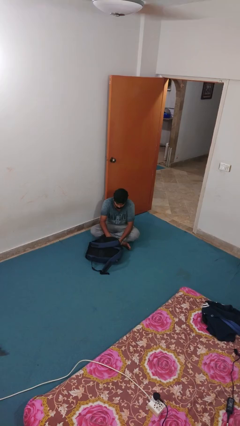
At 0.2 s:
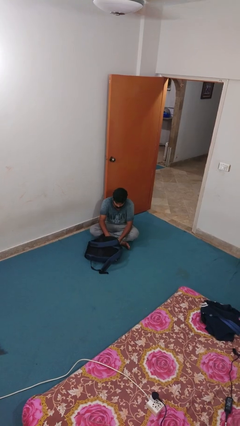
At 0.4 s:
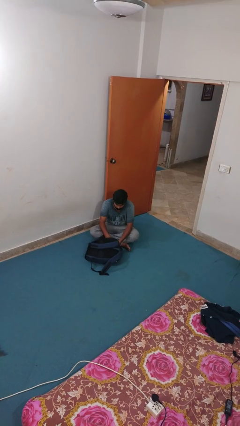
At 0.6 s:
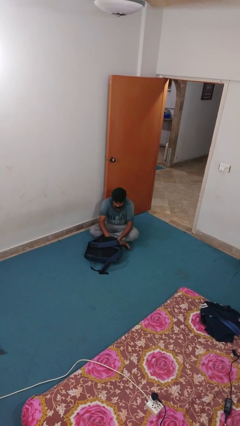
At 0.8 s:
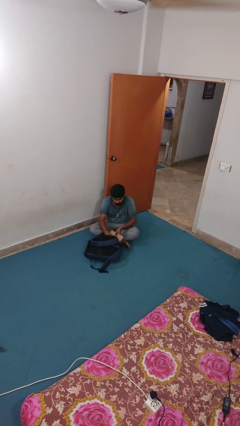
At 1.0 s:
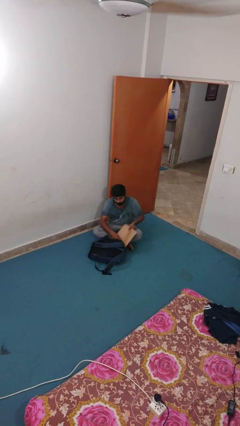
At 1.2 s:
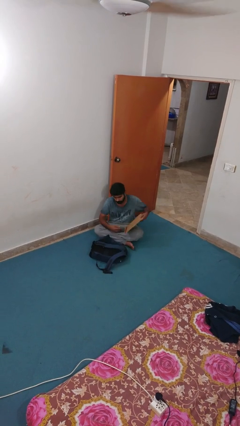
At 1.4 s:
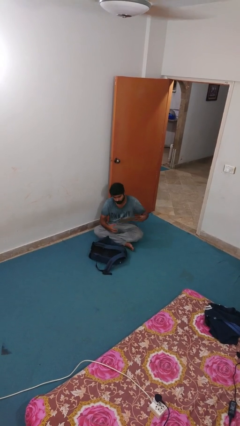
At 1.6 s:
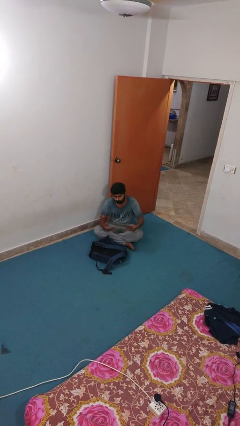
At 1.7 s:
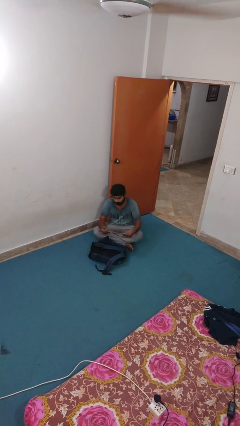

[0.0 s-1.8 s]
person takes object from backpack

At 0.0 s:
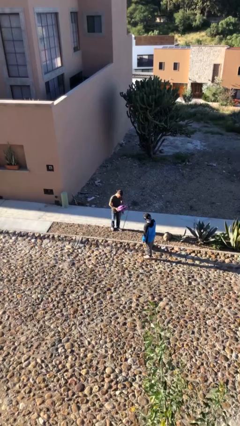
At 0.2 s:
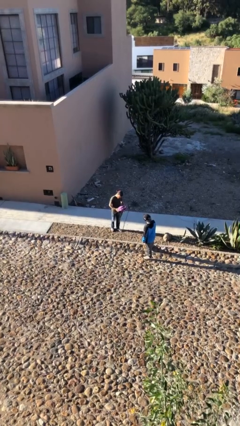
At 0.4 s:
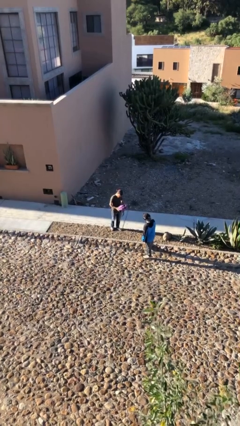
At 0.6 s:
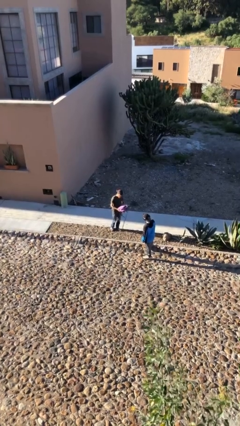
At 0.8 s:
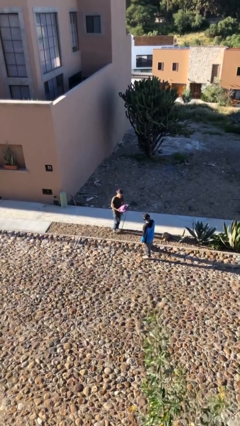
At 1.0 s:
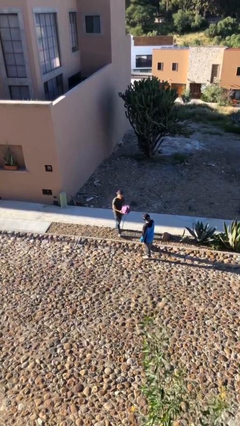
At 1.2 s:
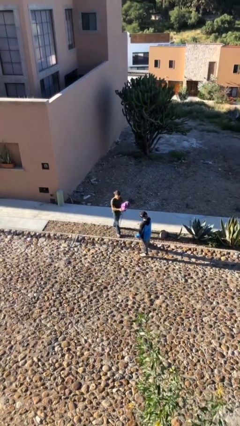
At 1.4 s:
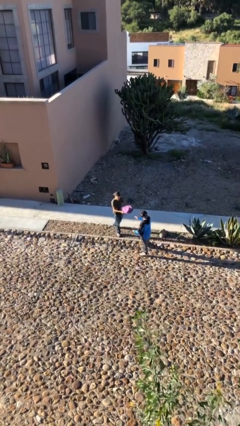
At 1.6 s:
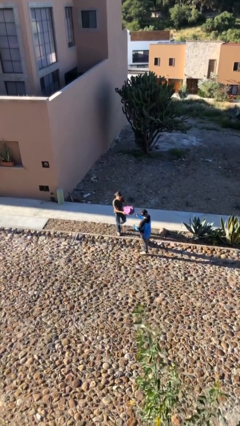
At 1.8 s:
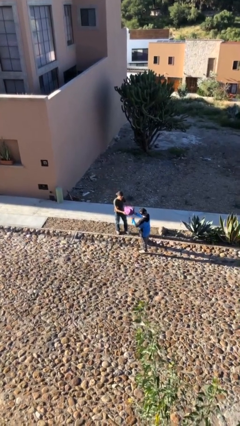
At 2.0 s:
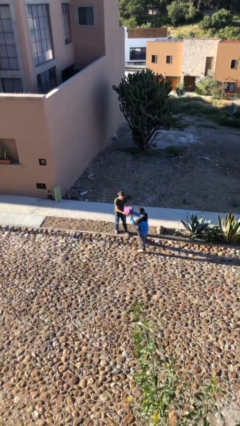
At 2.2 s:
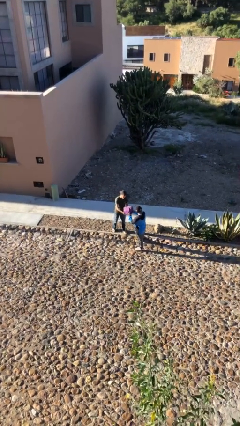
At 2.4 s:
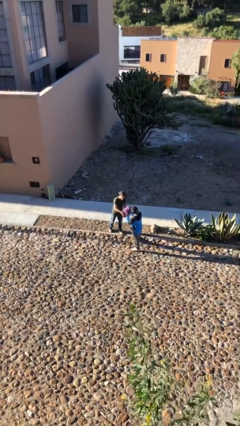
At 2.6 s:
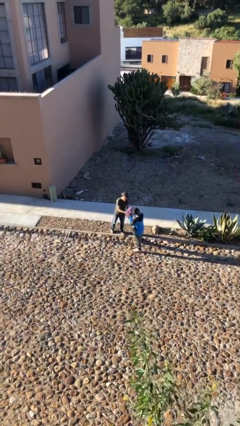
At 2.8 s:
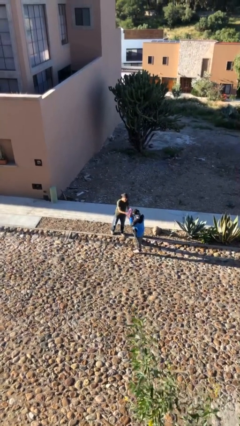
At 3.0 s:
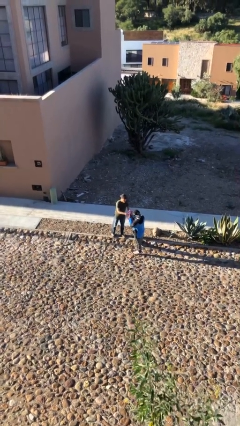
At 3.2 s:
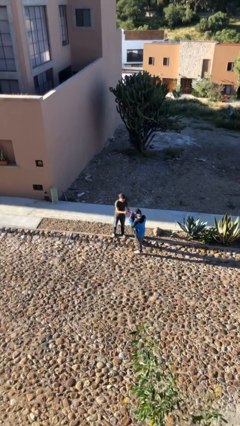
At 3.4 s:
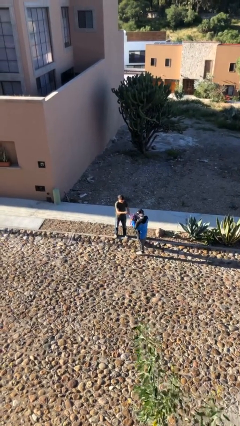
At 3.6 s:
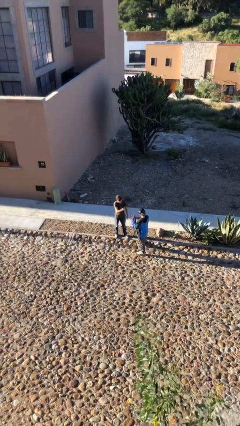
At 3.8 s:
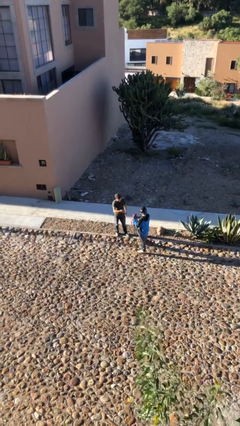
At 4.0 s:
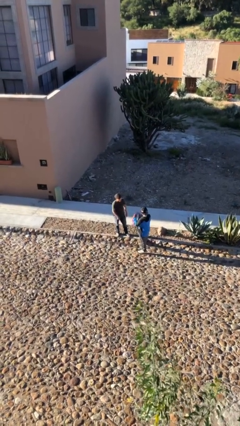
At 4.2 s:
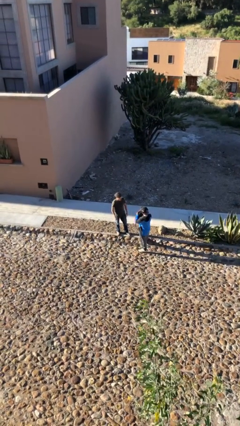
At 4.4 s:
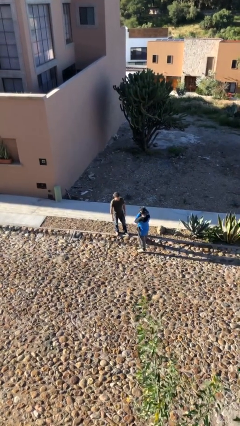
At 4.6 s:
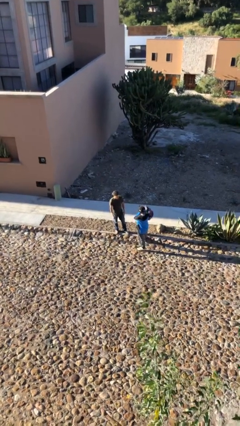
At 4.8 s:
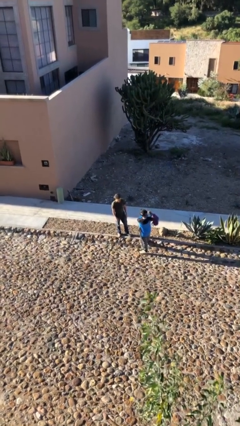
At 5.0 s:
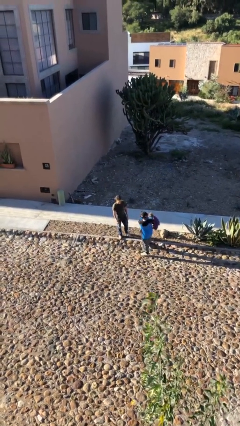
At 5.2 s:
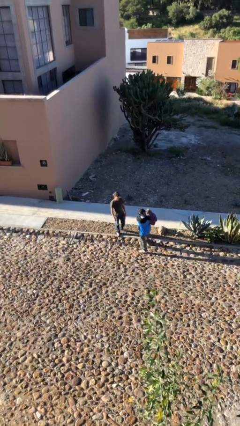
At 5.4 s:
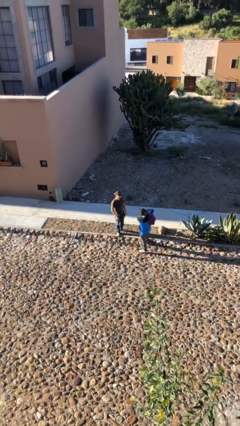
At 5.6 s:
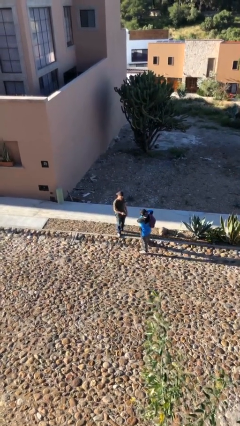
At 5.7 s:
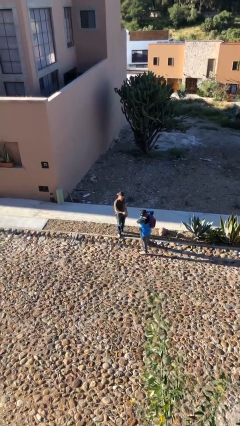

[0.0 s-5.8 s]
person transfers object to person

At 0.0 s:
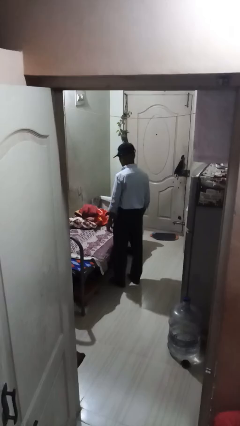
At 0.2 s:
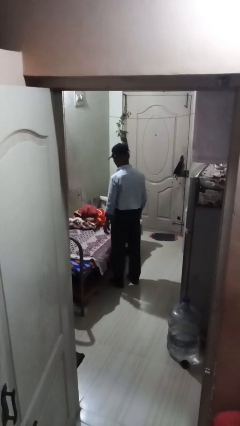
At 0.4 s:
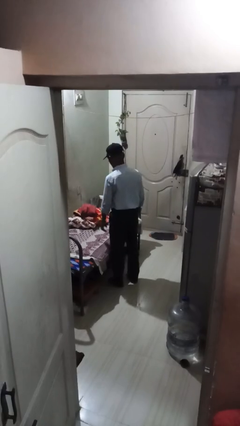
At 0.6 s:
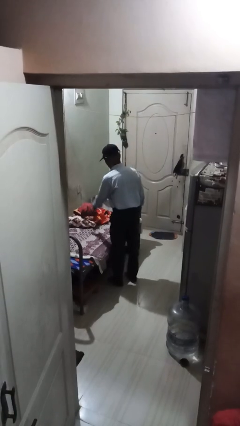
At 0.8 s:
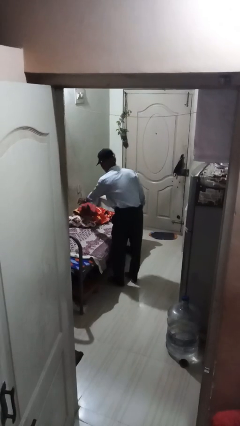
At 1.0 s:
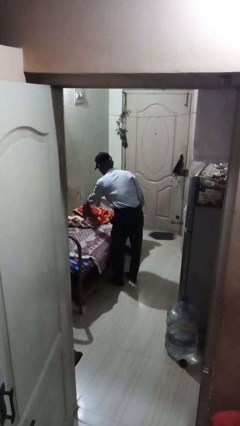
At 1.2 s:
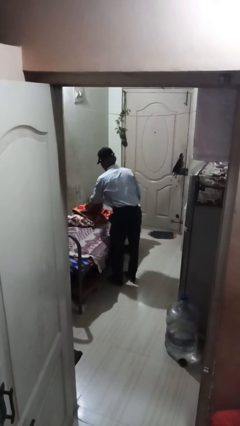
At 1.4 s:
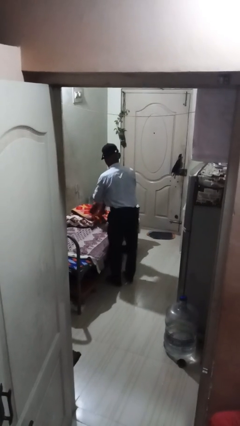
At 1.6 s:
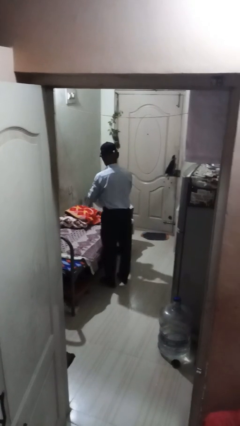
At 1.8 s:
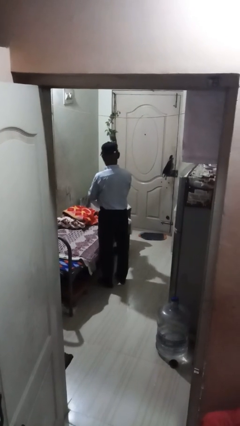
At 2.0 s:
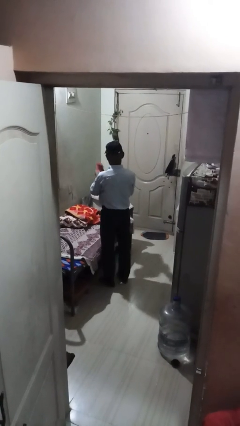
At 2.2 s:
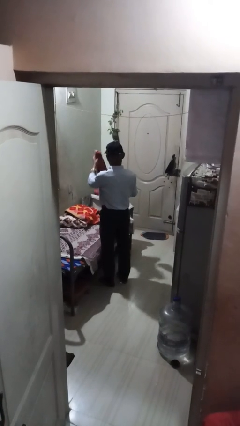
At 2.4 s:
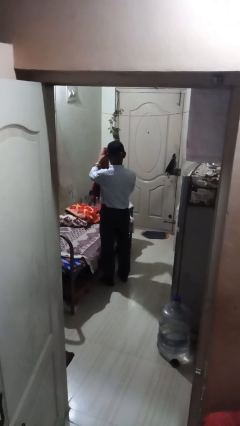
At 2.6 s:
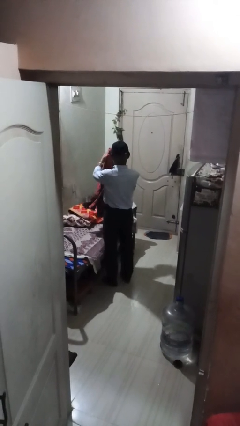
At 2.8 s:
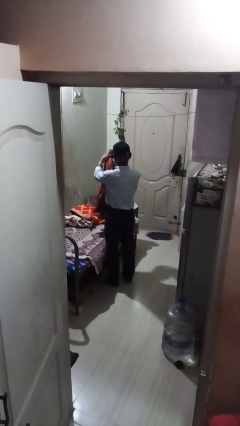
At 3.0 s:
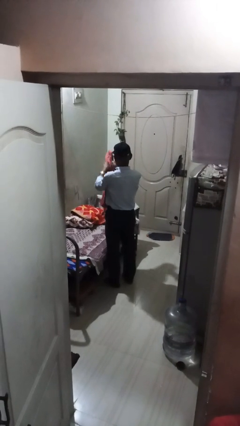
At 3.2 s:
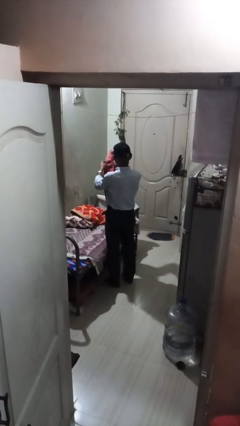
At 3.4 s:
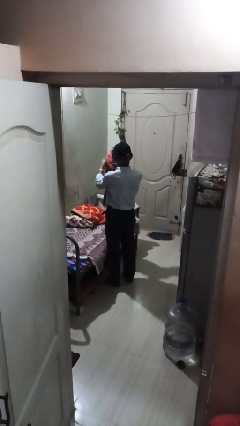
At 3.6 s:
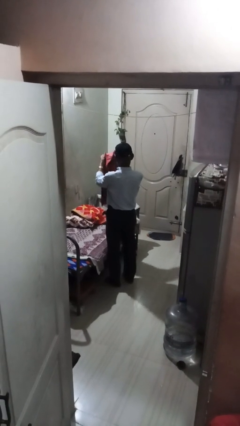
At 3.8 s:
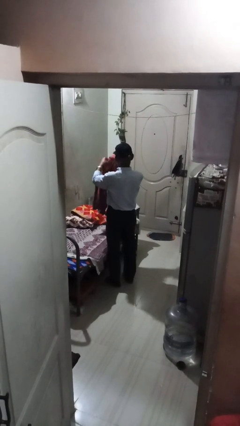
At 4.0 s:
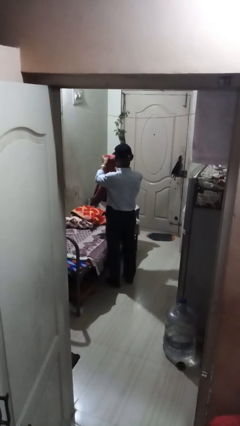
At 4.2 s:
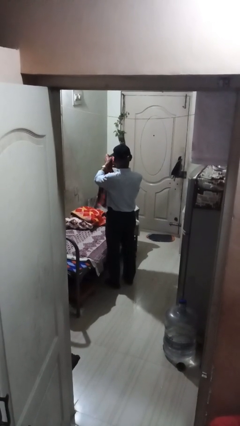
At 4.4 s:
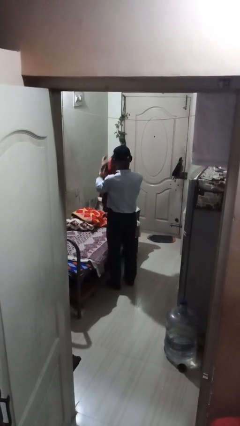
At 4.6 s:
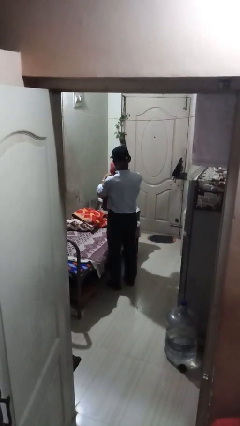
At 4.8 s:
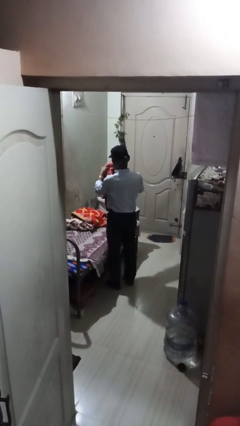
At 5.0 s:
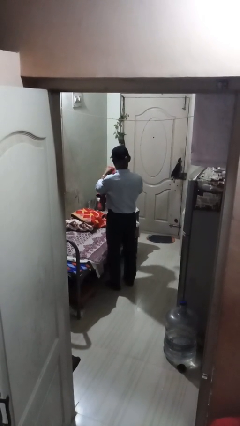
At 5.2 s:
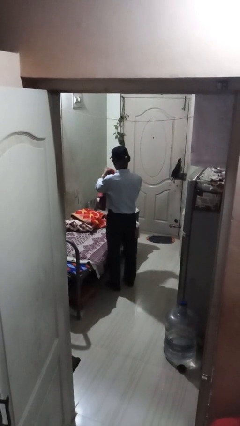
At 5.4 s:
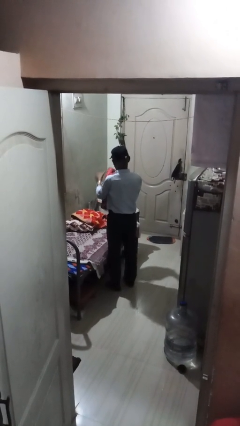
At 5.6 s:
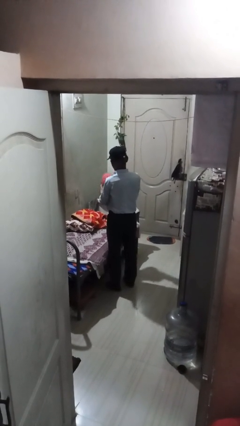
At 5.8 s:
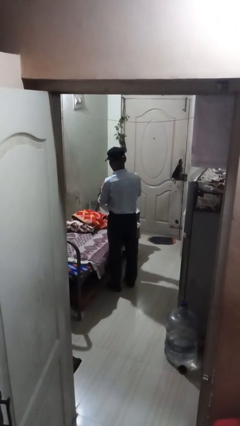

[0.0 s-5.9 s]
person folds shirt

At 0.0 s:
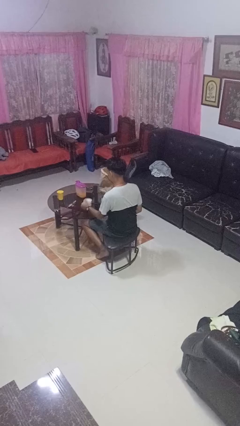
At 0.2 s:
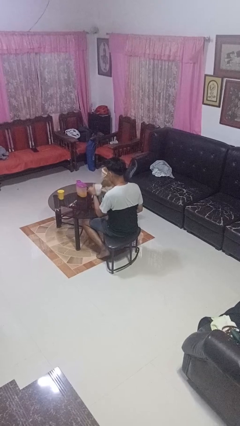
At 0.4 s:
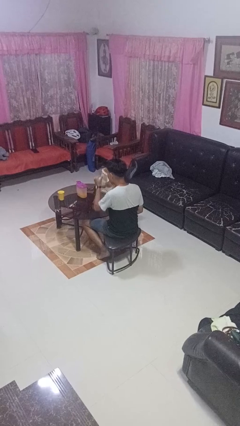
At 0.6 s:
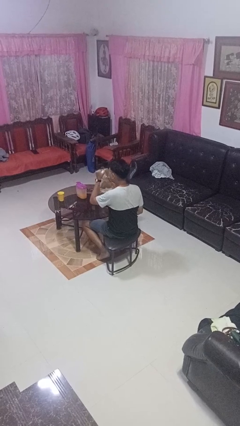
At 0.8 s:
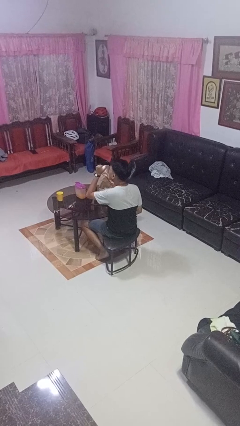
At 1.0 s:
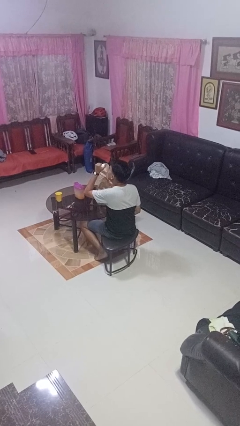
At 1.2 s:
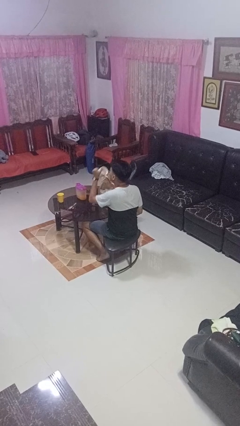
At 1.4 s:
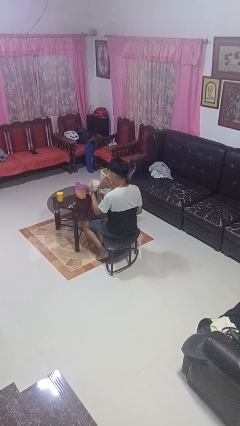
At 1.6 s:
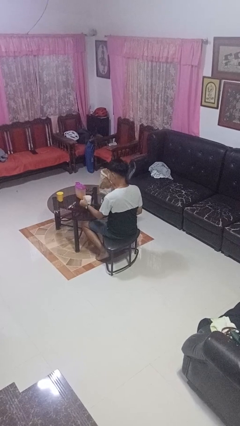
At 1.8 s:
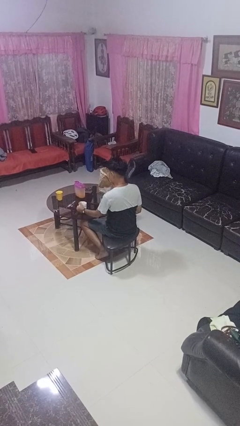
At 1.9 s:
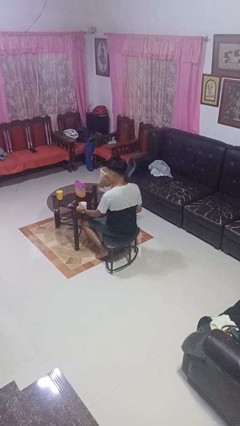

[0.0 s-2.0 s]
person drinks from mug

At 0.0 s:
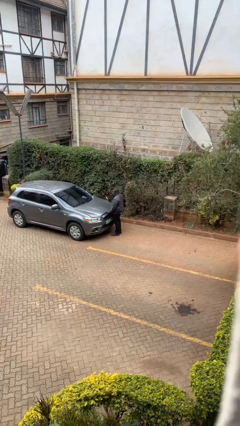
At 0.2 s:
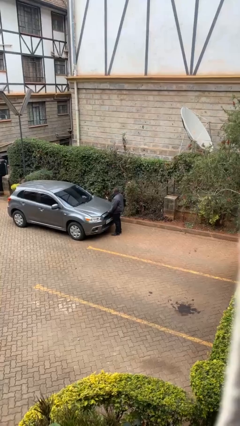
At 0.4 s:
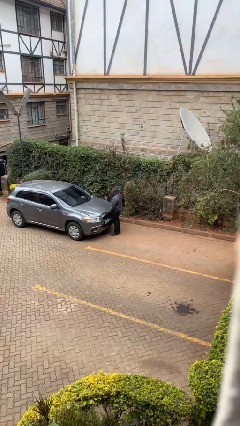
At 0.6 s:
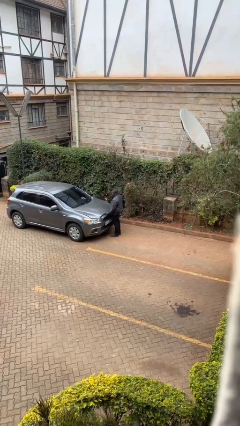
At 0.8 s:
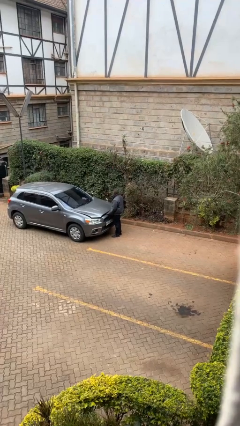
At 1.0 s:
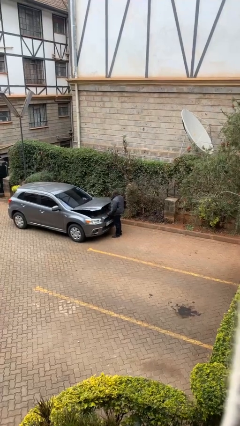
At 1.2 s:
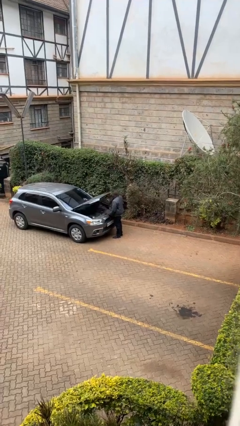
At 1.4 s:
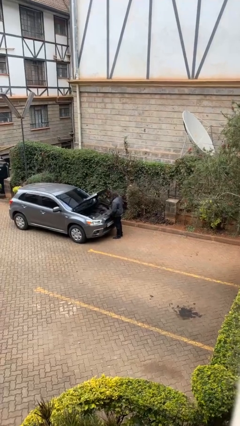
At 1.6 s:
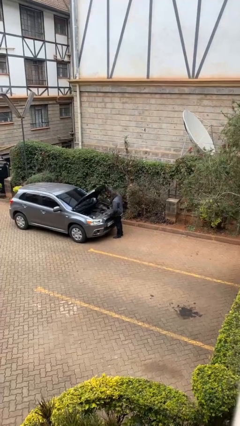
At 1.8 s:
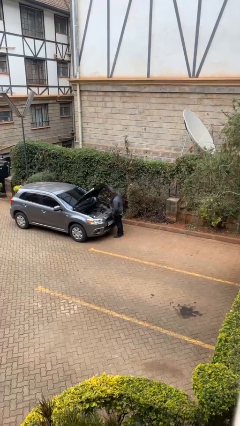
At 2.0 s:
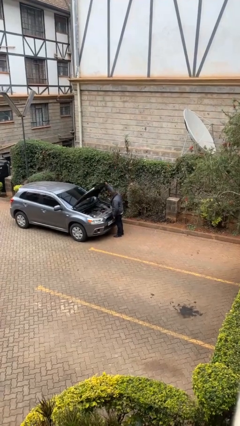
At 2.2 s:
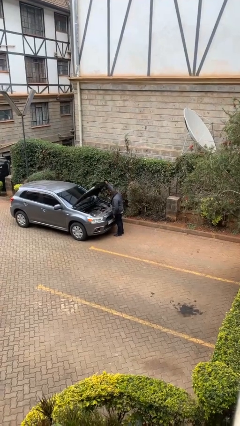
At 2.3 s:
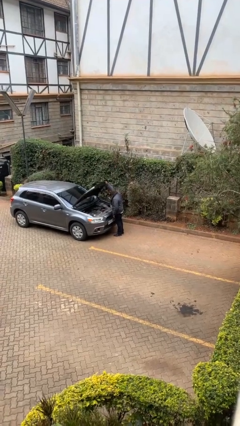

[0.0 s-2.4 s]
person opens car hood
